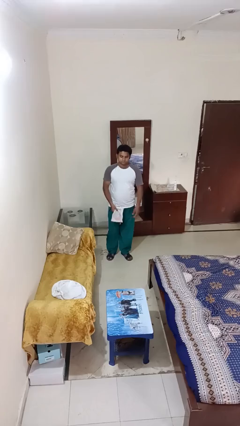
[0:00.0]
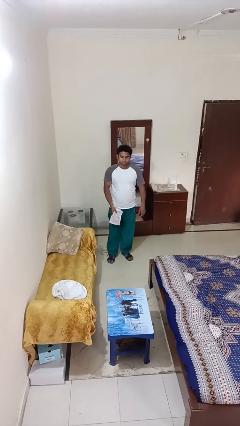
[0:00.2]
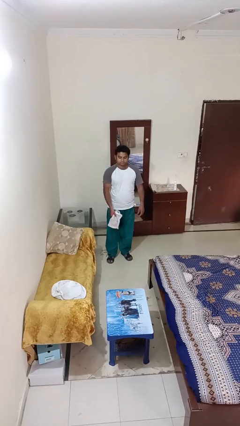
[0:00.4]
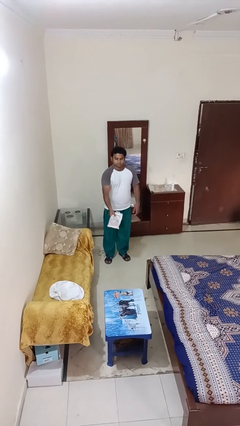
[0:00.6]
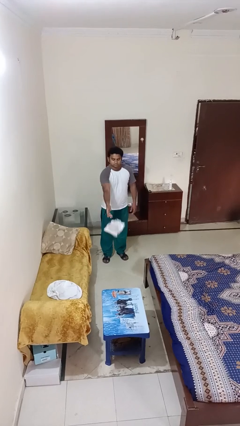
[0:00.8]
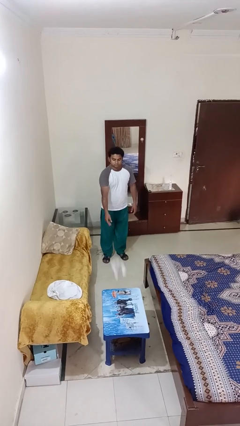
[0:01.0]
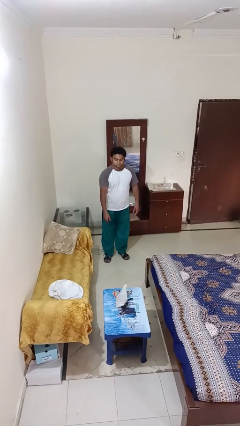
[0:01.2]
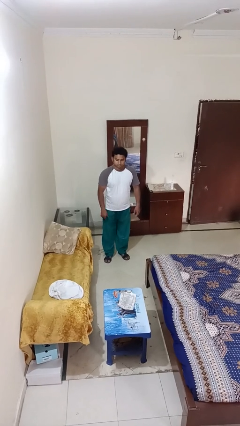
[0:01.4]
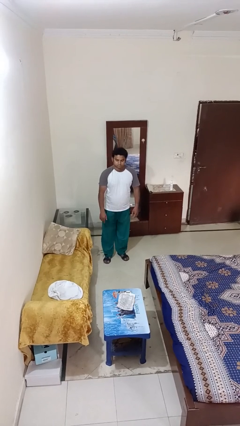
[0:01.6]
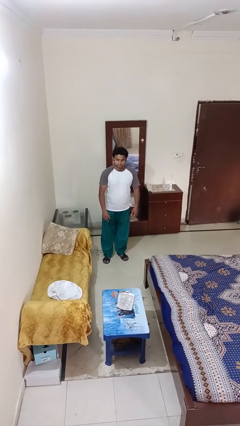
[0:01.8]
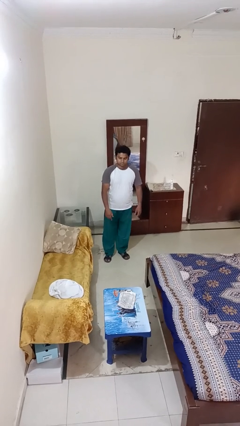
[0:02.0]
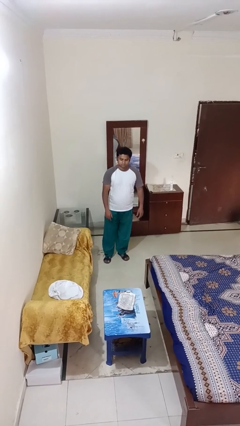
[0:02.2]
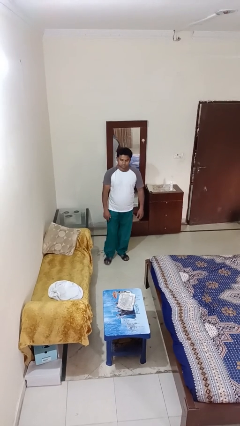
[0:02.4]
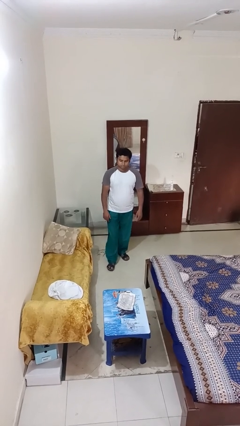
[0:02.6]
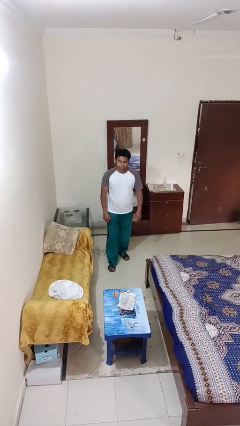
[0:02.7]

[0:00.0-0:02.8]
person throws object on table

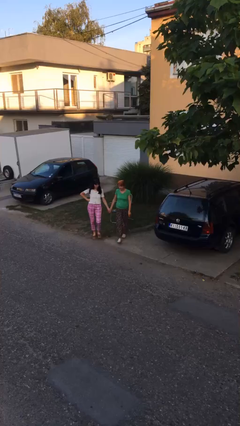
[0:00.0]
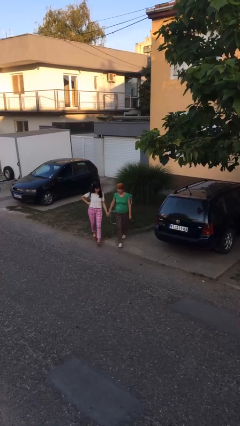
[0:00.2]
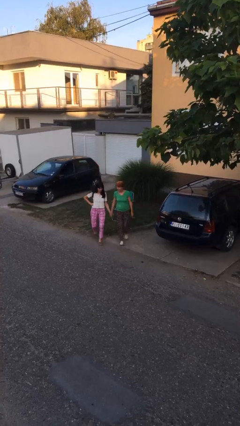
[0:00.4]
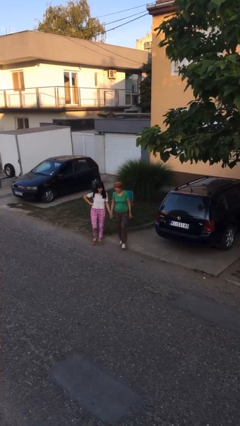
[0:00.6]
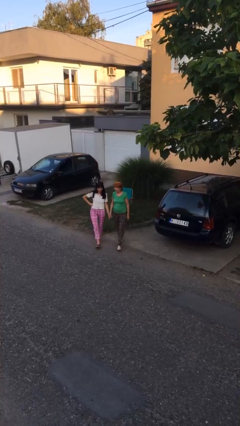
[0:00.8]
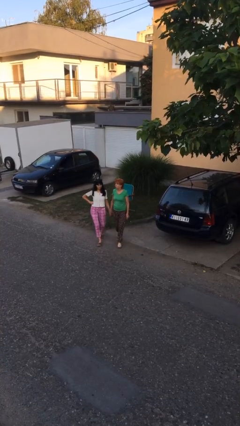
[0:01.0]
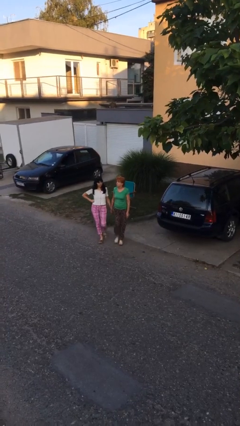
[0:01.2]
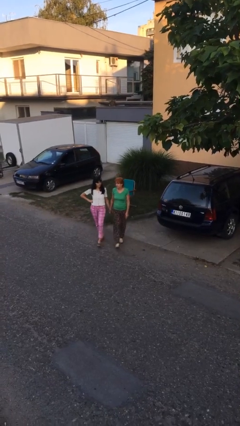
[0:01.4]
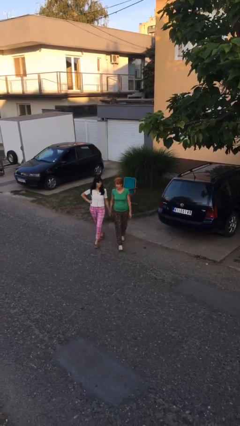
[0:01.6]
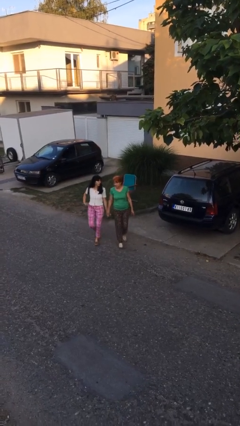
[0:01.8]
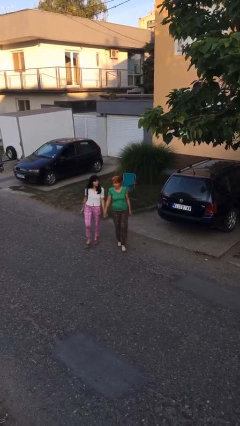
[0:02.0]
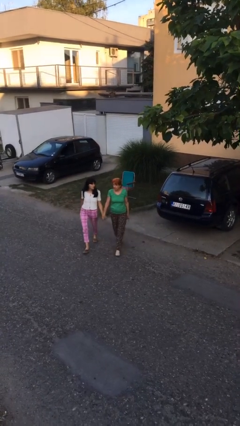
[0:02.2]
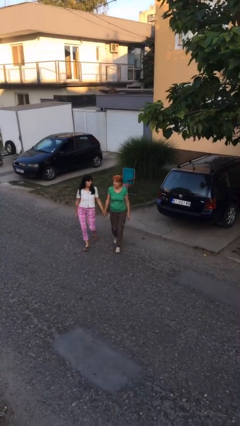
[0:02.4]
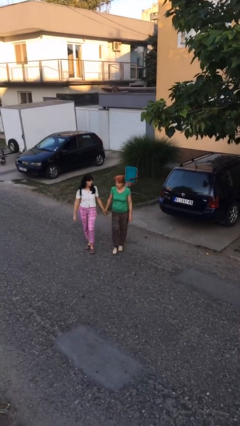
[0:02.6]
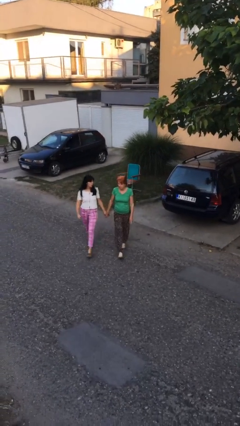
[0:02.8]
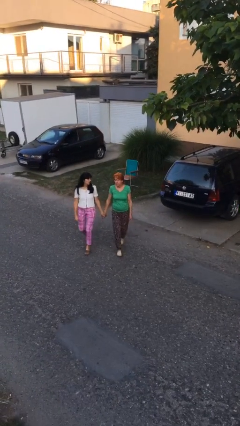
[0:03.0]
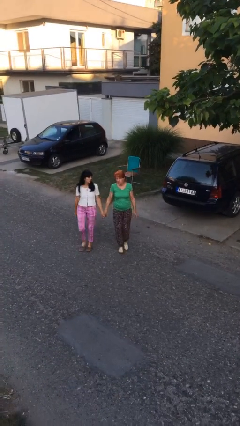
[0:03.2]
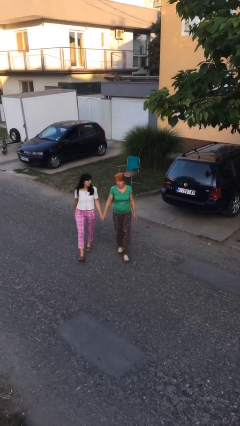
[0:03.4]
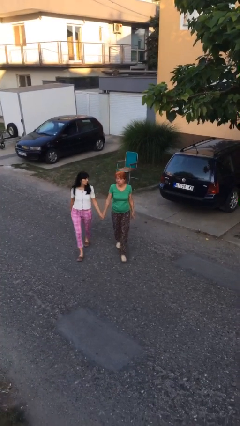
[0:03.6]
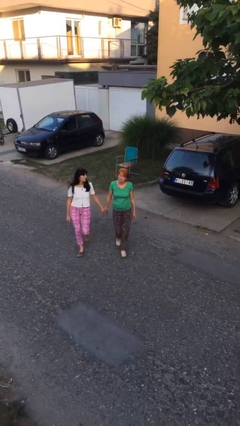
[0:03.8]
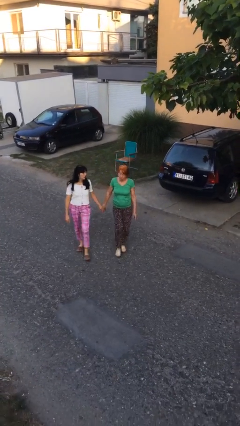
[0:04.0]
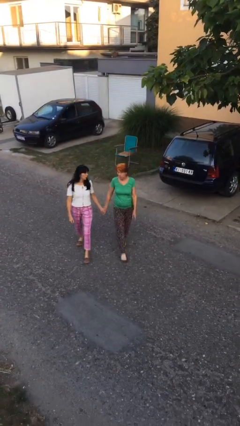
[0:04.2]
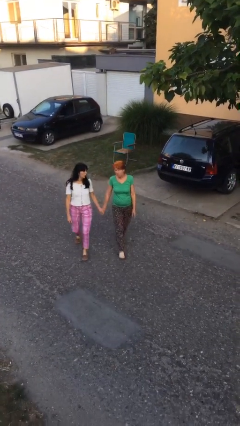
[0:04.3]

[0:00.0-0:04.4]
person holds hand

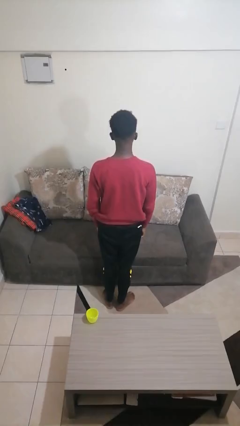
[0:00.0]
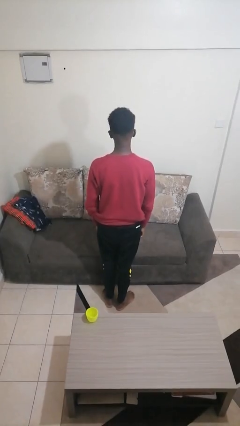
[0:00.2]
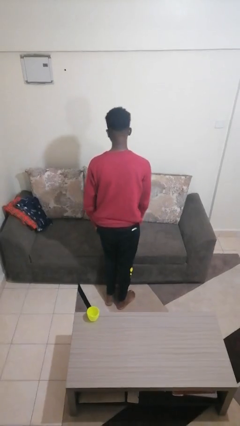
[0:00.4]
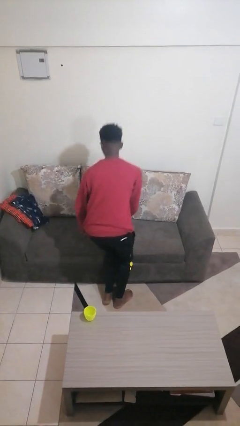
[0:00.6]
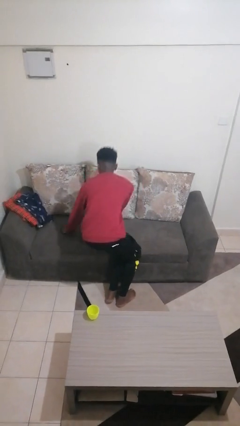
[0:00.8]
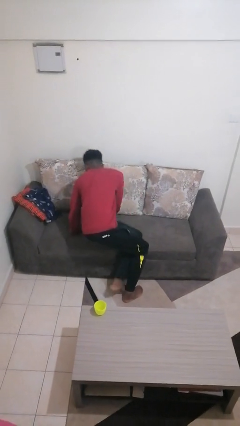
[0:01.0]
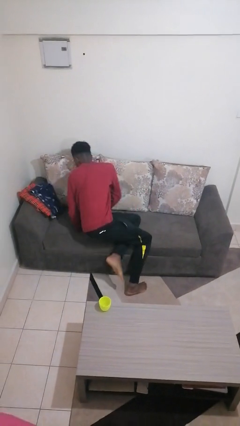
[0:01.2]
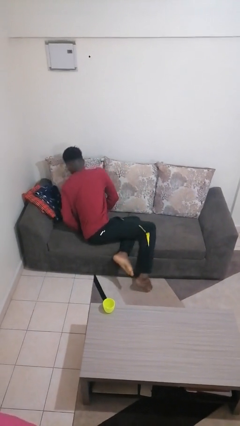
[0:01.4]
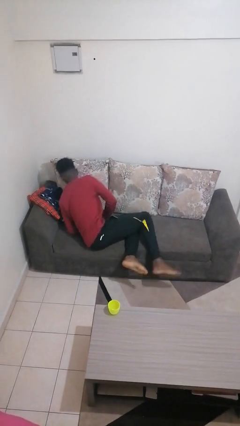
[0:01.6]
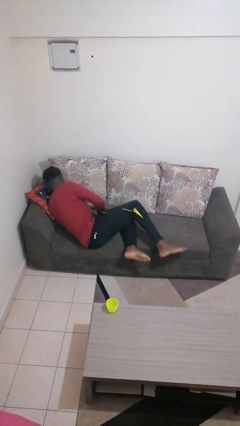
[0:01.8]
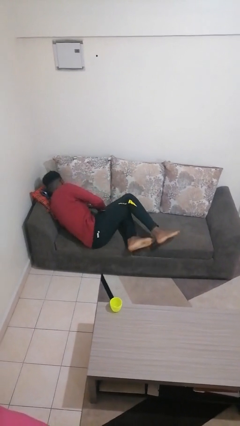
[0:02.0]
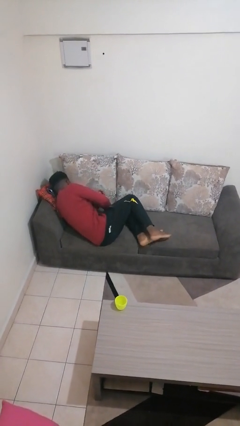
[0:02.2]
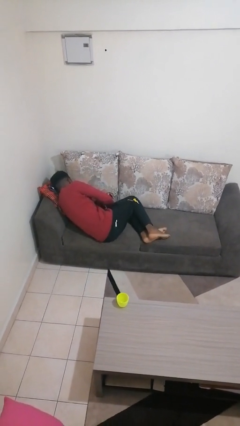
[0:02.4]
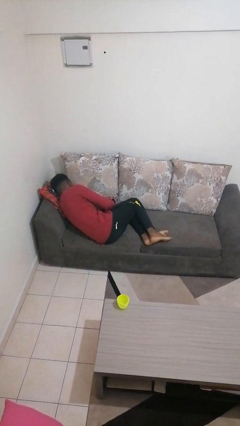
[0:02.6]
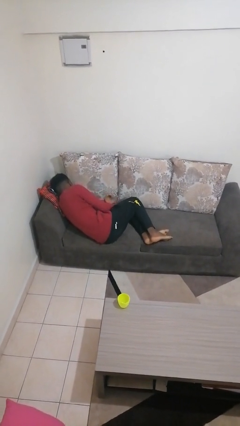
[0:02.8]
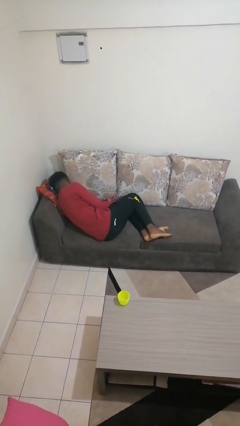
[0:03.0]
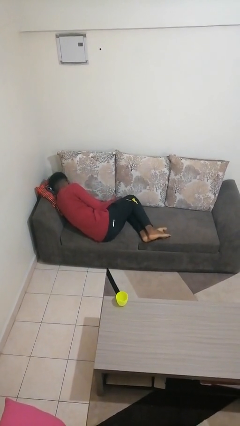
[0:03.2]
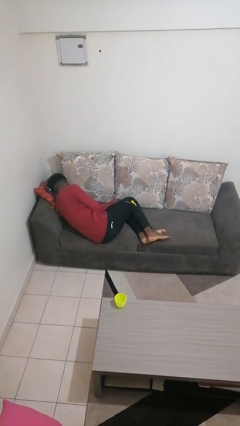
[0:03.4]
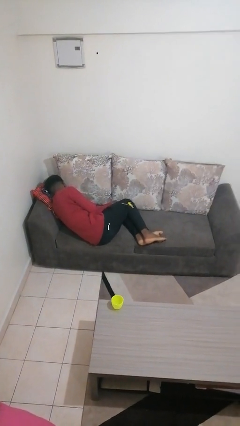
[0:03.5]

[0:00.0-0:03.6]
person lies down on couch

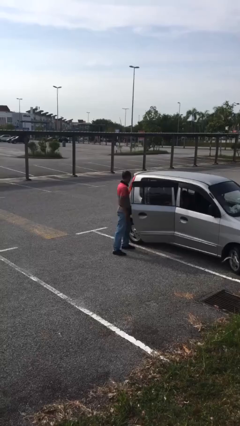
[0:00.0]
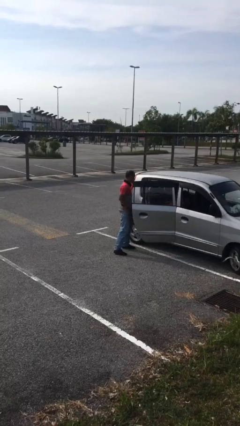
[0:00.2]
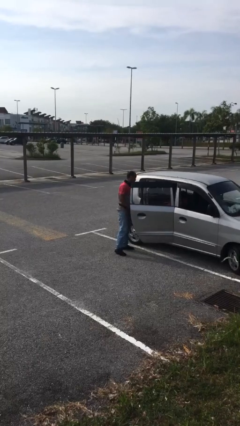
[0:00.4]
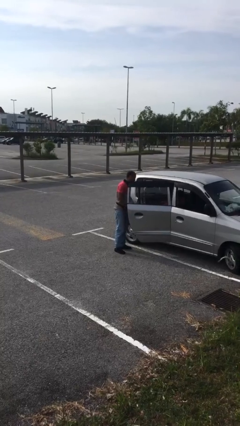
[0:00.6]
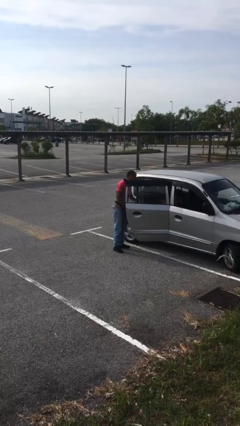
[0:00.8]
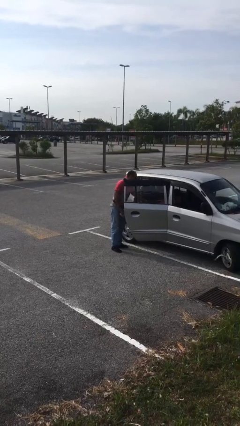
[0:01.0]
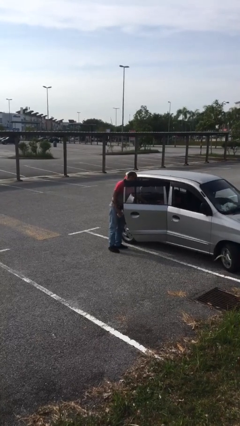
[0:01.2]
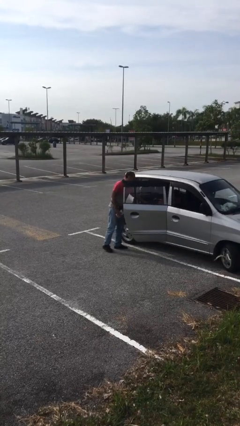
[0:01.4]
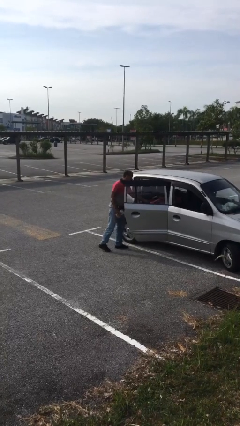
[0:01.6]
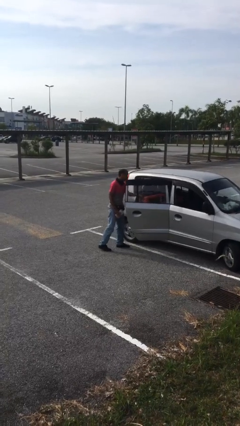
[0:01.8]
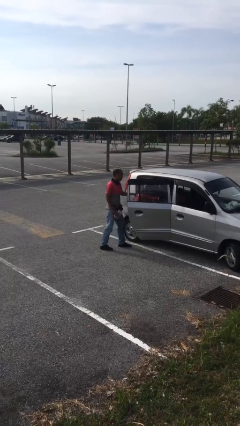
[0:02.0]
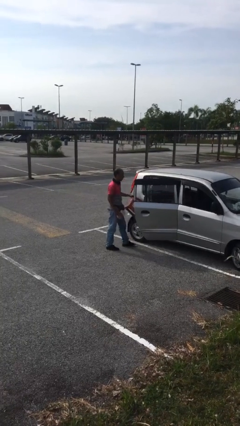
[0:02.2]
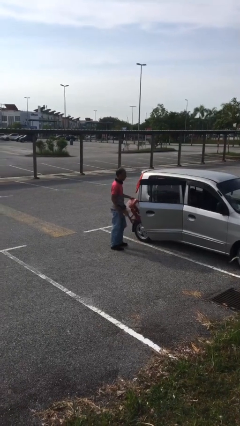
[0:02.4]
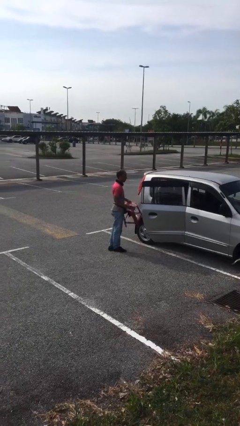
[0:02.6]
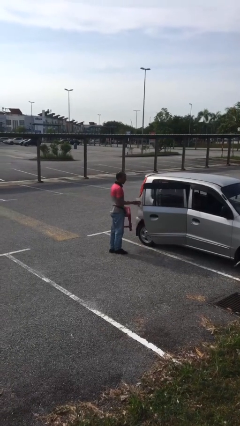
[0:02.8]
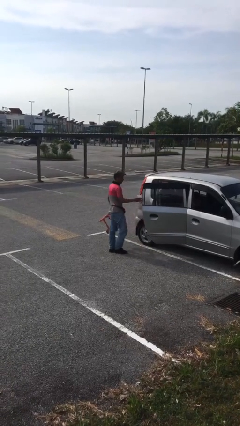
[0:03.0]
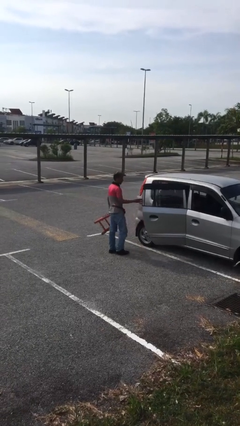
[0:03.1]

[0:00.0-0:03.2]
person unloads car

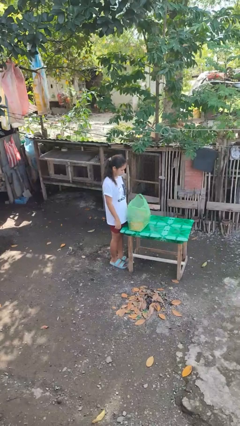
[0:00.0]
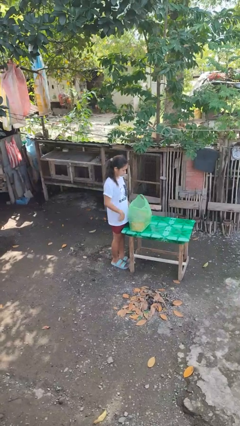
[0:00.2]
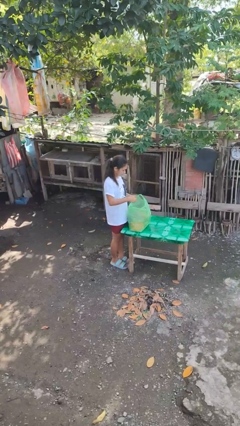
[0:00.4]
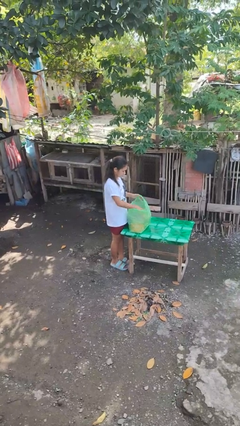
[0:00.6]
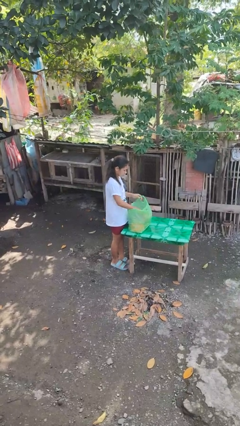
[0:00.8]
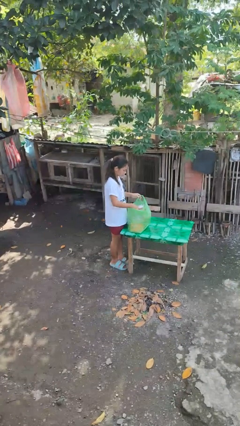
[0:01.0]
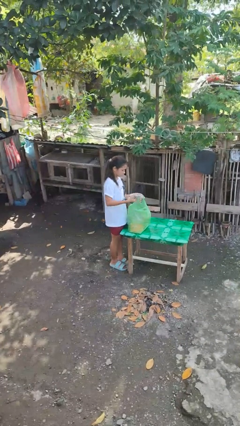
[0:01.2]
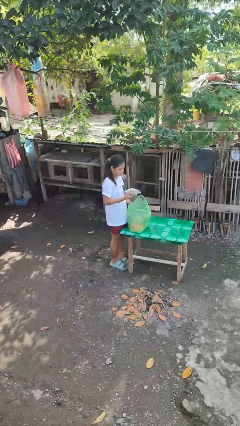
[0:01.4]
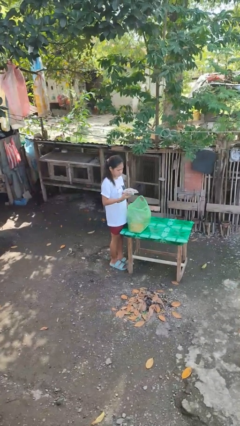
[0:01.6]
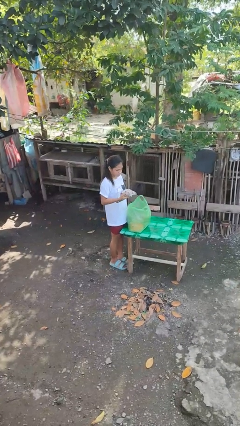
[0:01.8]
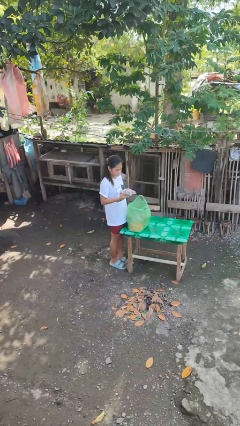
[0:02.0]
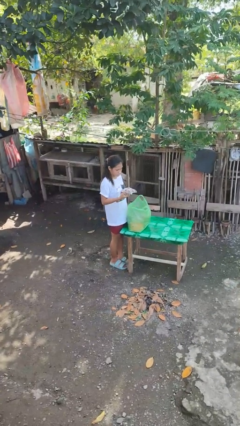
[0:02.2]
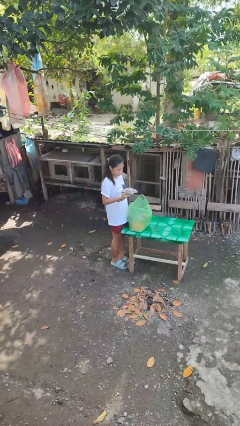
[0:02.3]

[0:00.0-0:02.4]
person takes object from bag

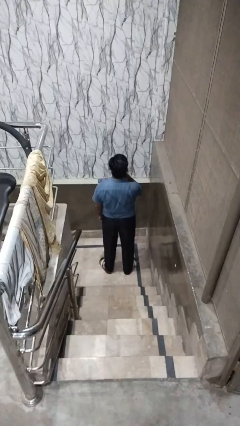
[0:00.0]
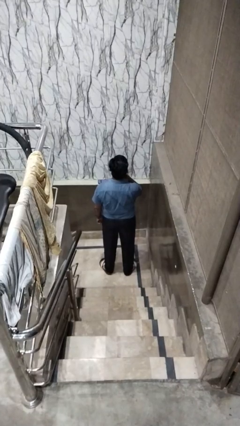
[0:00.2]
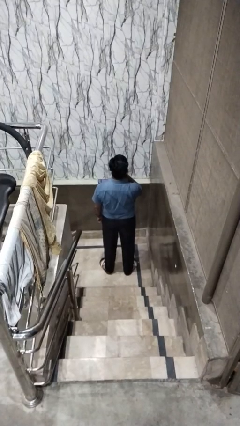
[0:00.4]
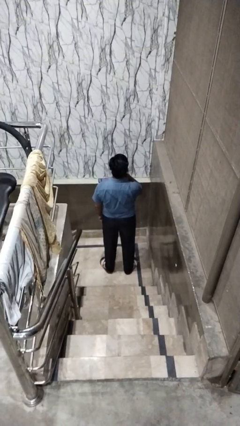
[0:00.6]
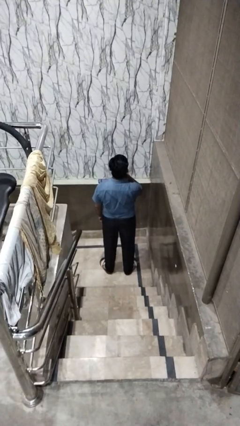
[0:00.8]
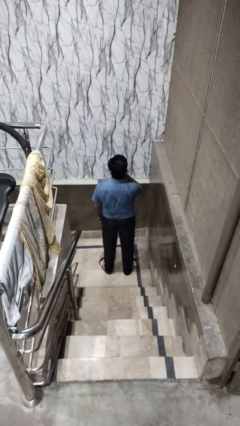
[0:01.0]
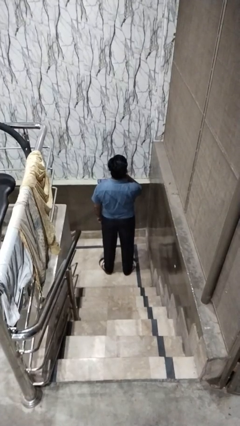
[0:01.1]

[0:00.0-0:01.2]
person gestures be quiet
